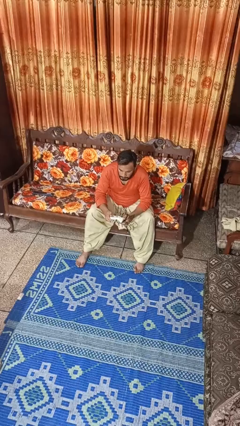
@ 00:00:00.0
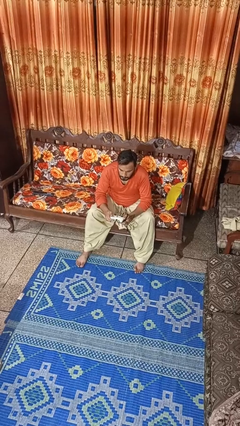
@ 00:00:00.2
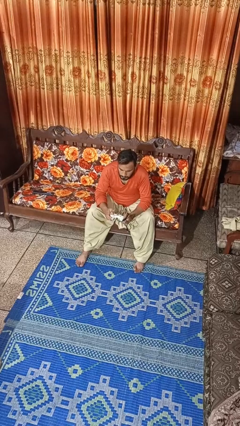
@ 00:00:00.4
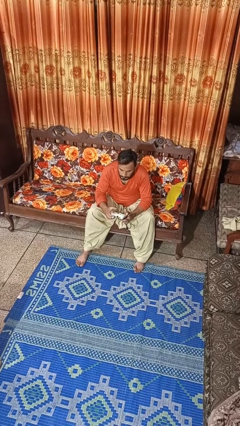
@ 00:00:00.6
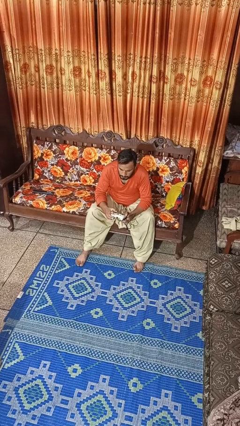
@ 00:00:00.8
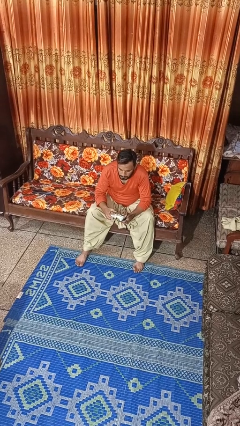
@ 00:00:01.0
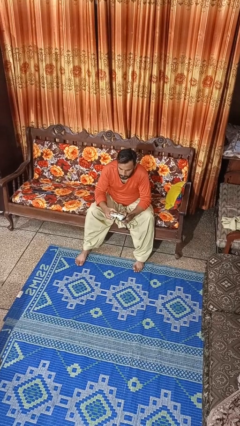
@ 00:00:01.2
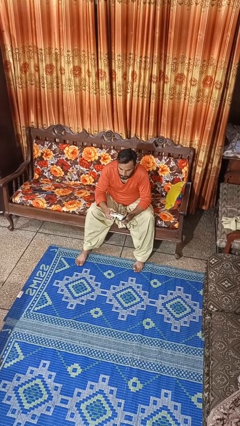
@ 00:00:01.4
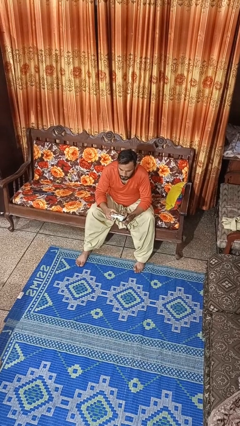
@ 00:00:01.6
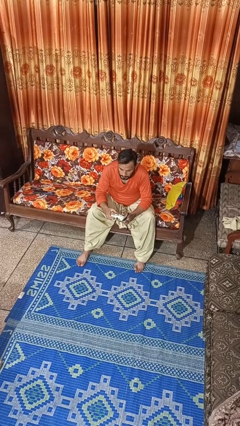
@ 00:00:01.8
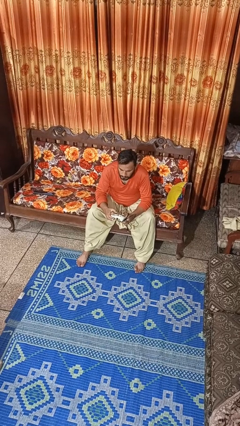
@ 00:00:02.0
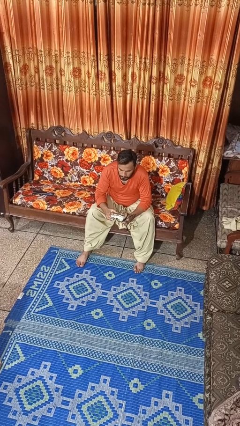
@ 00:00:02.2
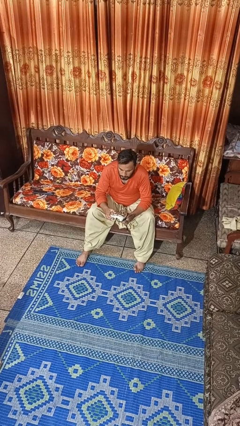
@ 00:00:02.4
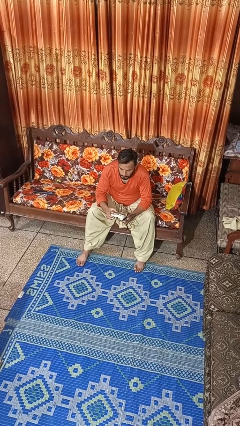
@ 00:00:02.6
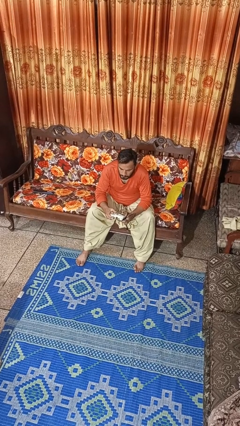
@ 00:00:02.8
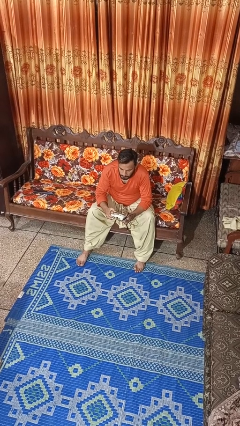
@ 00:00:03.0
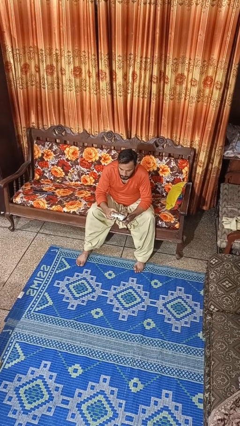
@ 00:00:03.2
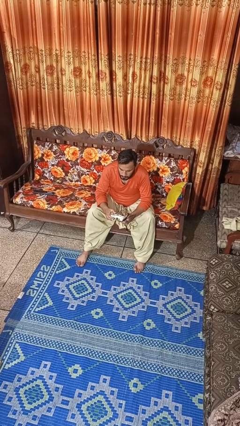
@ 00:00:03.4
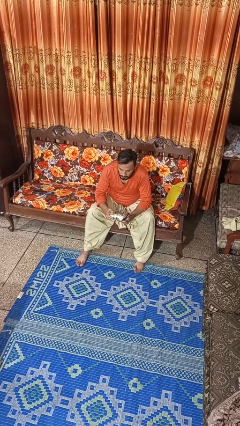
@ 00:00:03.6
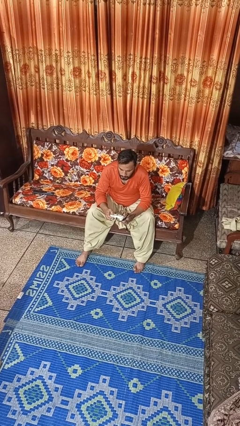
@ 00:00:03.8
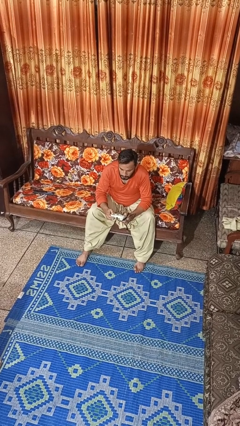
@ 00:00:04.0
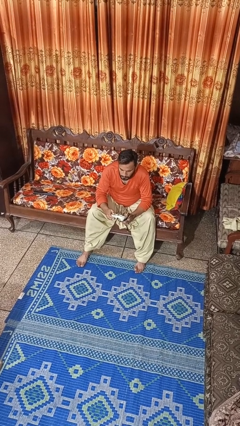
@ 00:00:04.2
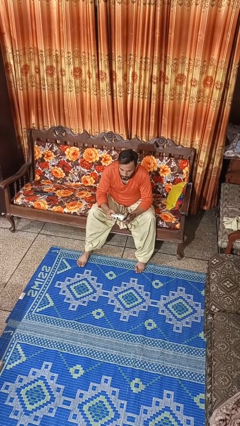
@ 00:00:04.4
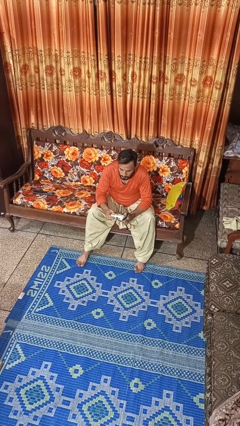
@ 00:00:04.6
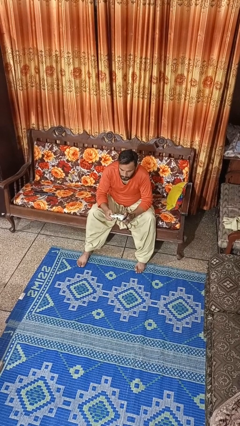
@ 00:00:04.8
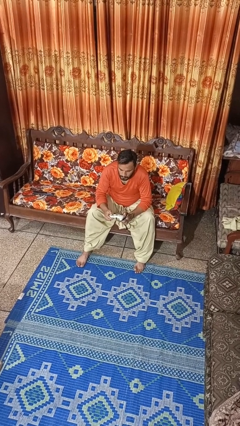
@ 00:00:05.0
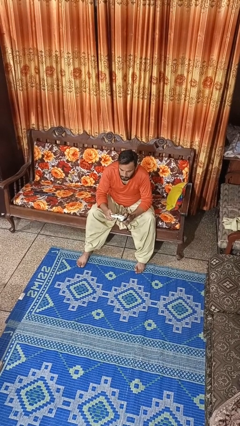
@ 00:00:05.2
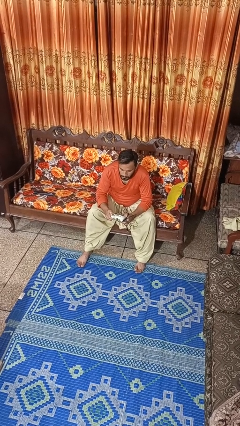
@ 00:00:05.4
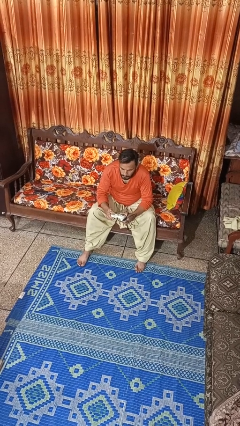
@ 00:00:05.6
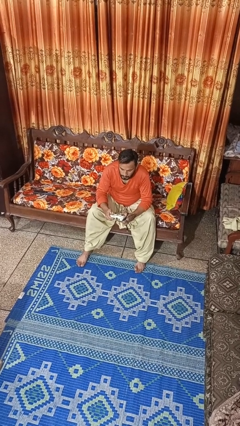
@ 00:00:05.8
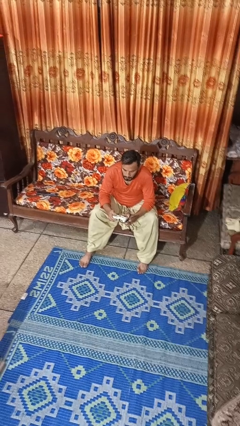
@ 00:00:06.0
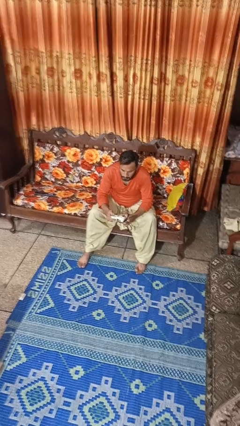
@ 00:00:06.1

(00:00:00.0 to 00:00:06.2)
person interacts with handheld game

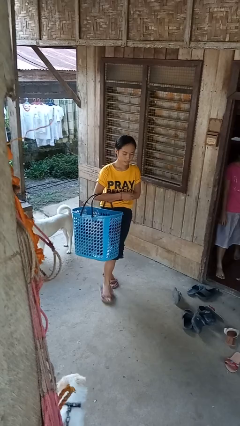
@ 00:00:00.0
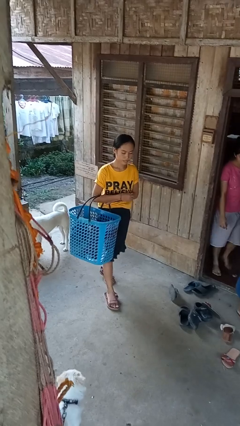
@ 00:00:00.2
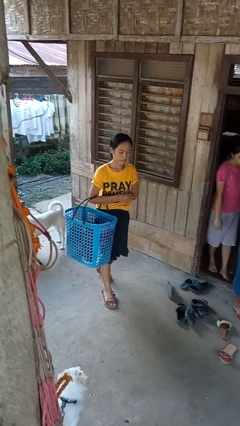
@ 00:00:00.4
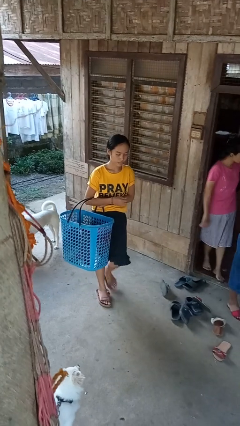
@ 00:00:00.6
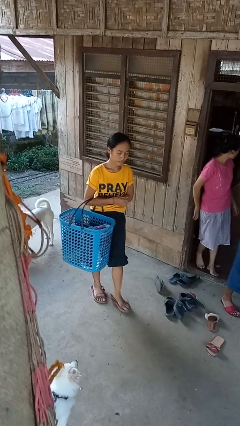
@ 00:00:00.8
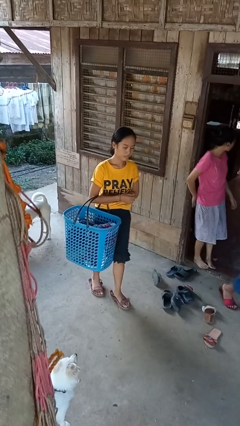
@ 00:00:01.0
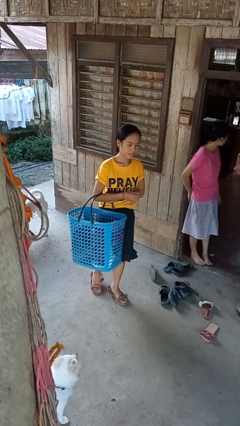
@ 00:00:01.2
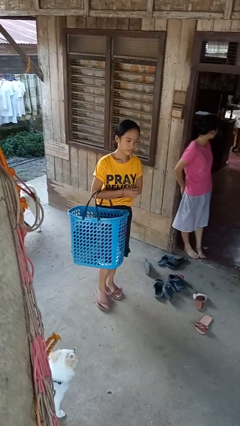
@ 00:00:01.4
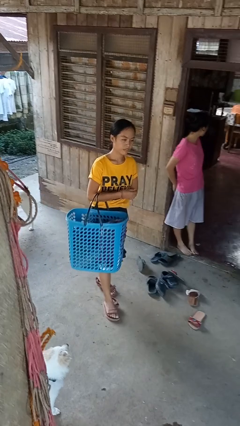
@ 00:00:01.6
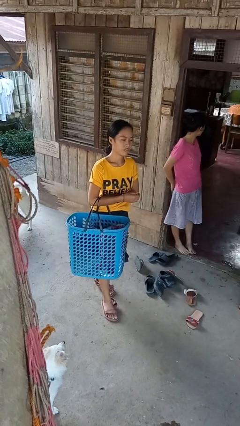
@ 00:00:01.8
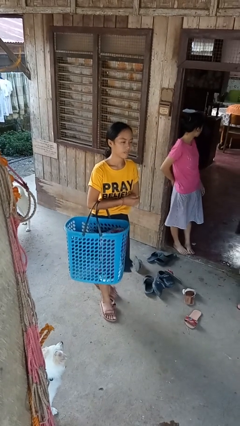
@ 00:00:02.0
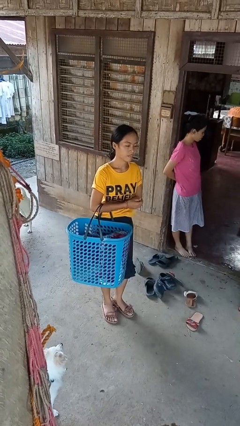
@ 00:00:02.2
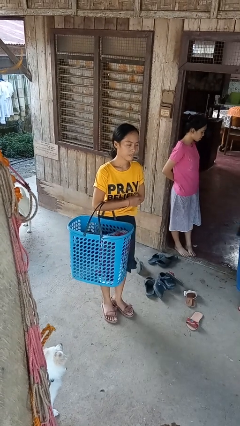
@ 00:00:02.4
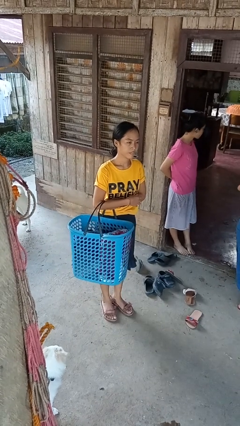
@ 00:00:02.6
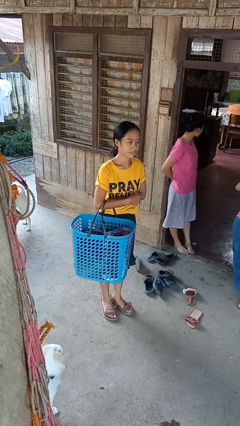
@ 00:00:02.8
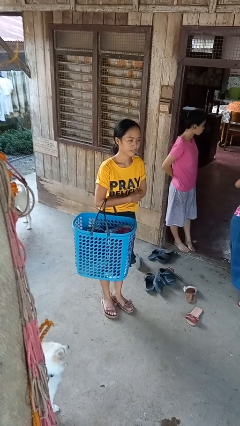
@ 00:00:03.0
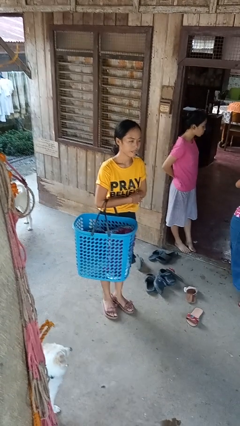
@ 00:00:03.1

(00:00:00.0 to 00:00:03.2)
person carries laundry basket

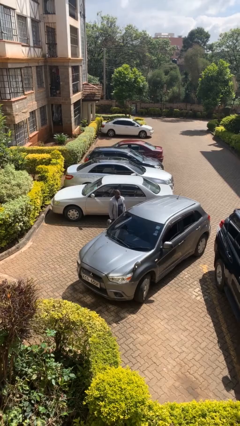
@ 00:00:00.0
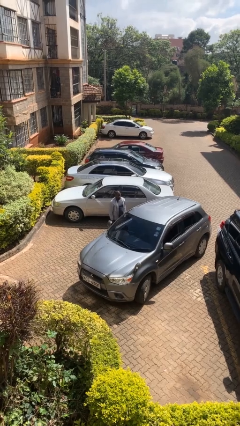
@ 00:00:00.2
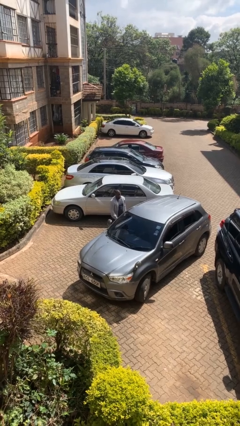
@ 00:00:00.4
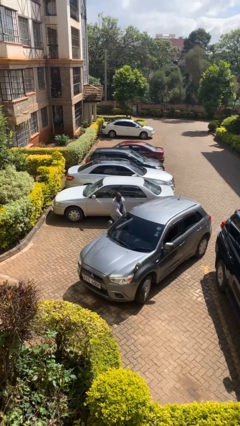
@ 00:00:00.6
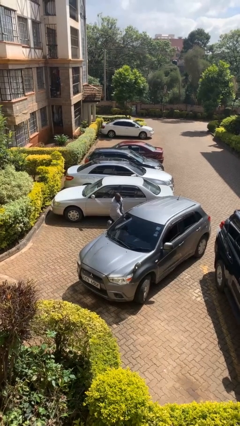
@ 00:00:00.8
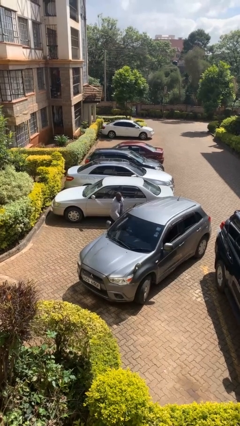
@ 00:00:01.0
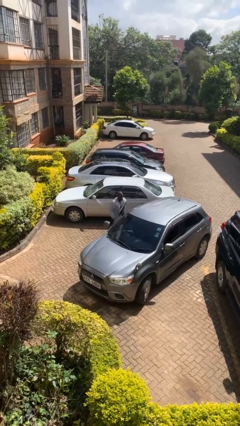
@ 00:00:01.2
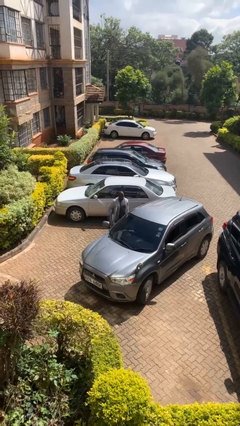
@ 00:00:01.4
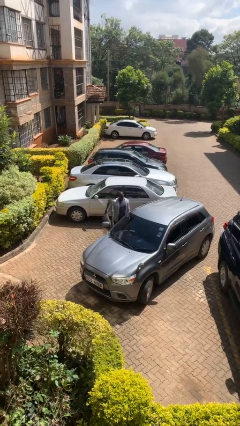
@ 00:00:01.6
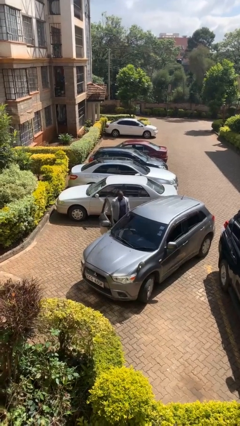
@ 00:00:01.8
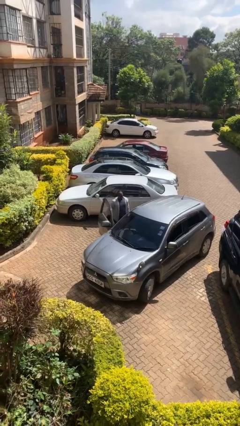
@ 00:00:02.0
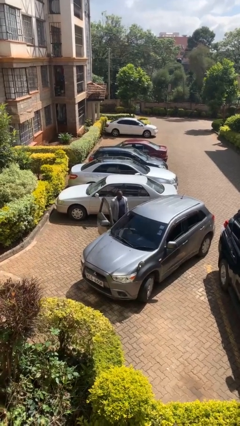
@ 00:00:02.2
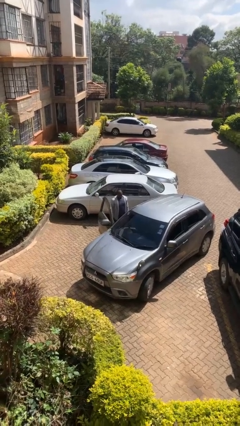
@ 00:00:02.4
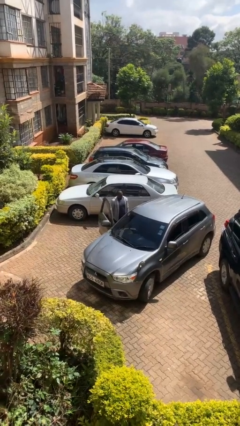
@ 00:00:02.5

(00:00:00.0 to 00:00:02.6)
person opens car door

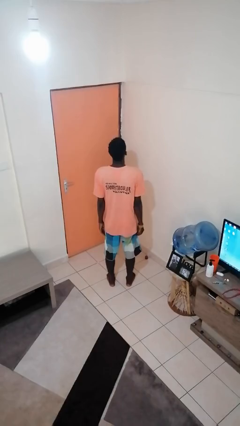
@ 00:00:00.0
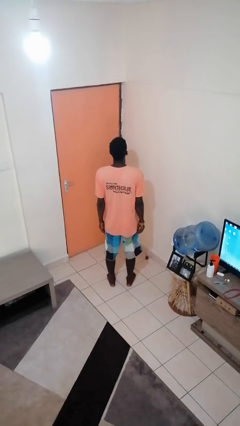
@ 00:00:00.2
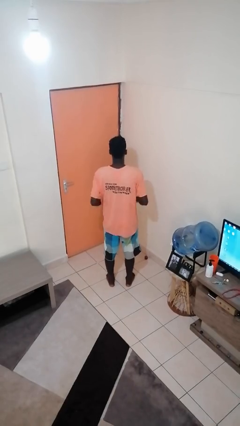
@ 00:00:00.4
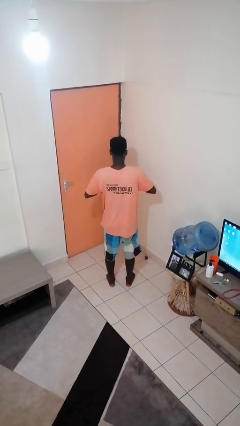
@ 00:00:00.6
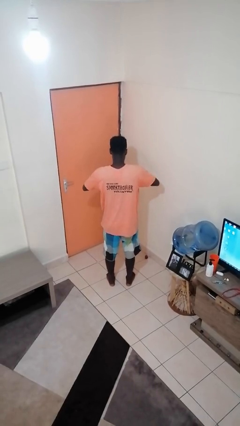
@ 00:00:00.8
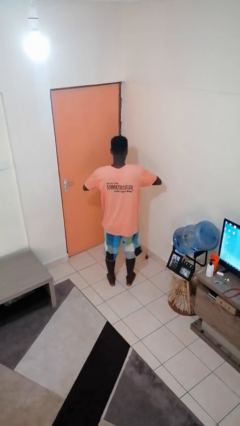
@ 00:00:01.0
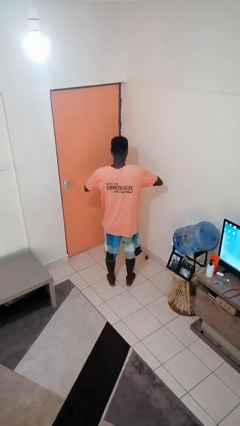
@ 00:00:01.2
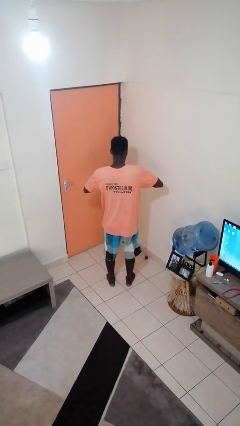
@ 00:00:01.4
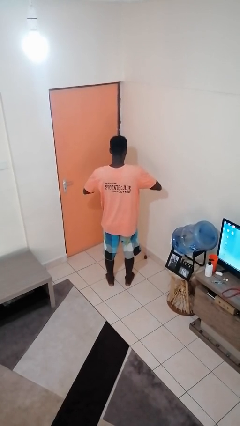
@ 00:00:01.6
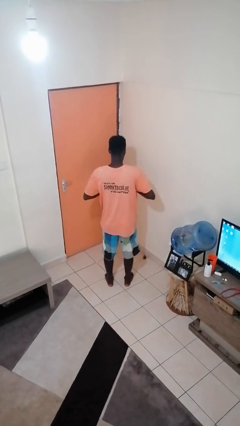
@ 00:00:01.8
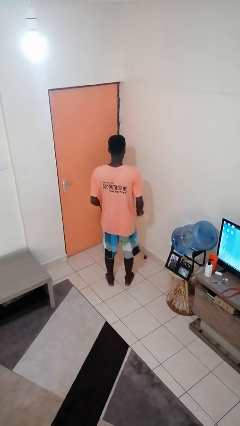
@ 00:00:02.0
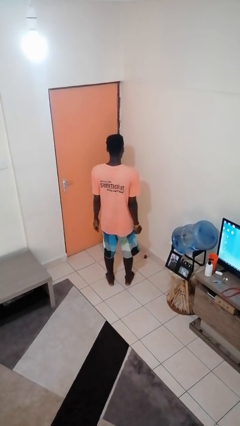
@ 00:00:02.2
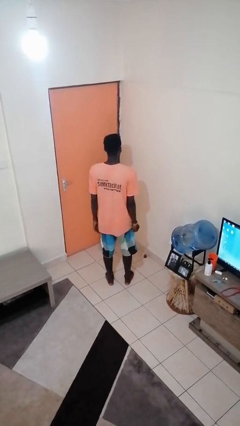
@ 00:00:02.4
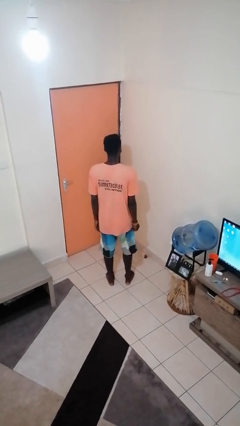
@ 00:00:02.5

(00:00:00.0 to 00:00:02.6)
person takes off ring

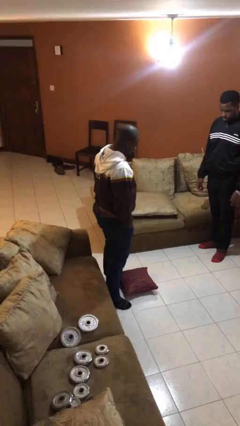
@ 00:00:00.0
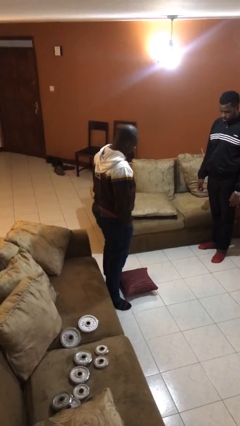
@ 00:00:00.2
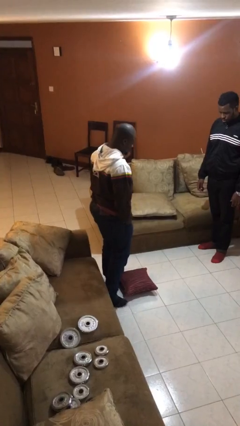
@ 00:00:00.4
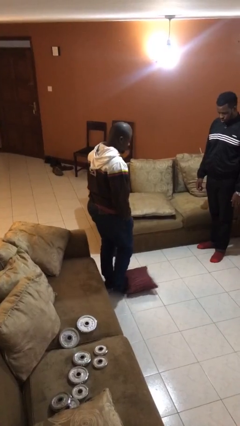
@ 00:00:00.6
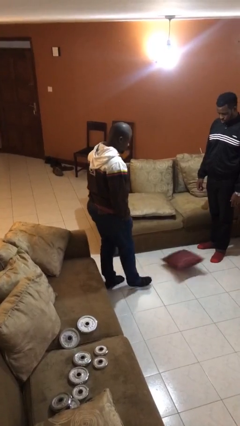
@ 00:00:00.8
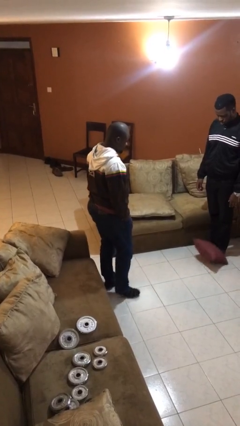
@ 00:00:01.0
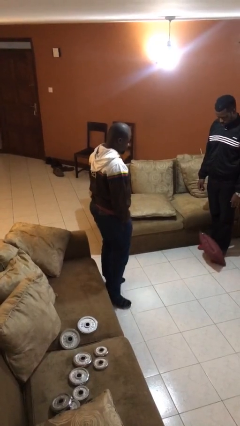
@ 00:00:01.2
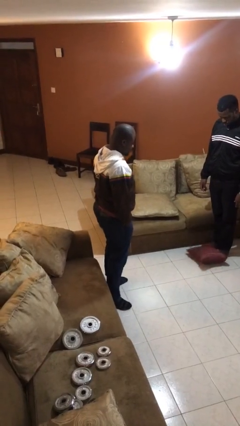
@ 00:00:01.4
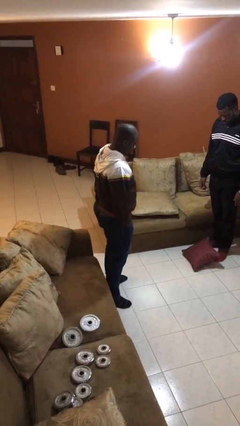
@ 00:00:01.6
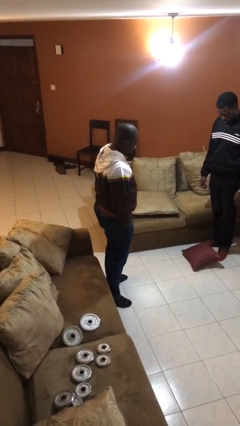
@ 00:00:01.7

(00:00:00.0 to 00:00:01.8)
person kicks object to person

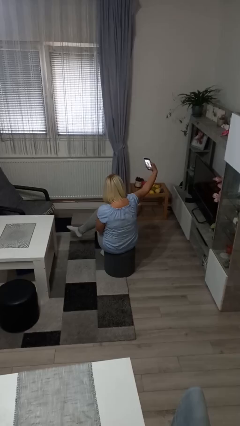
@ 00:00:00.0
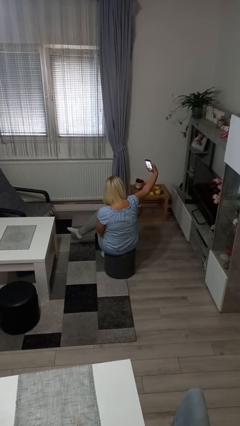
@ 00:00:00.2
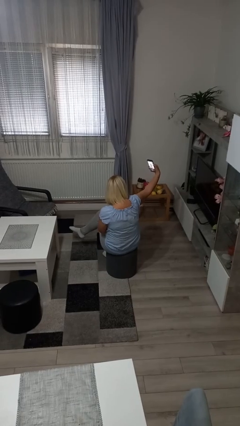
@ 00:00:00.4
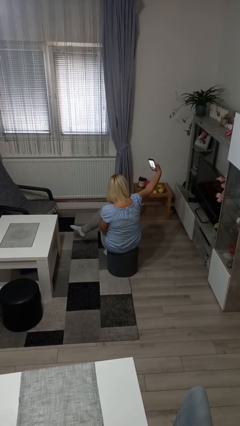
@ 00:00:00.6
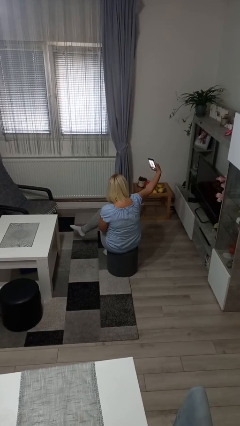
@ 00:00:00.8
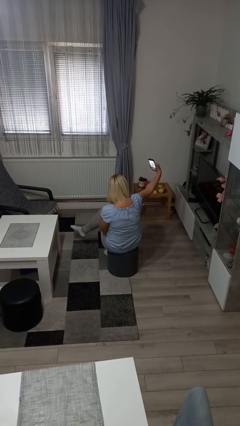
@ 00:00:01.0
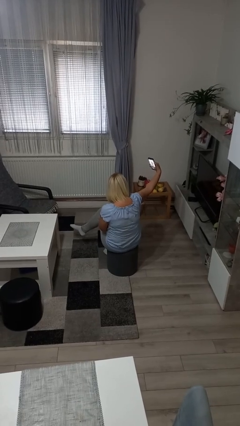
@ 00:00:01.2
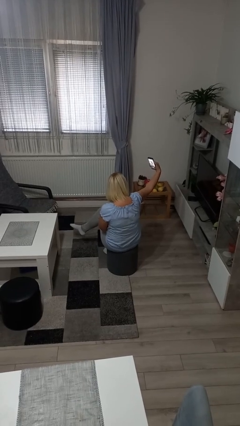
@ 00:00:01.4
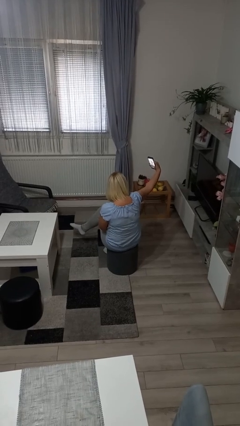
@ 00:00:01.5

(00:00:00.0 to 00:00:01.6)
person takes selfie
